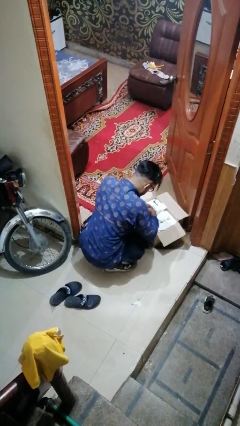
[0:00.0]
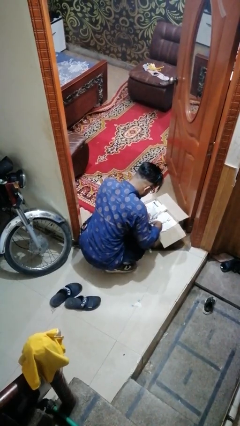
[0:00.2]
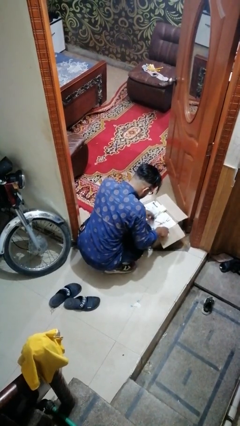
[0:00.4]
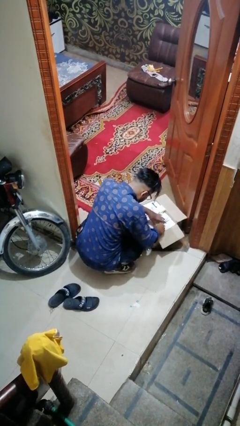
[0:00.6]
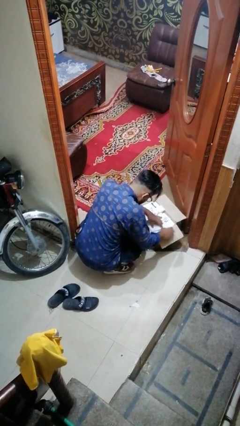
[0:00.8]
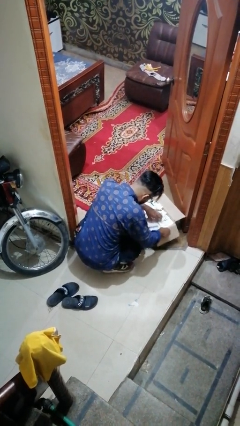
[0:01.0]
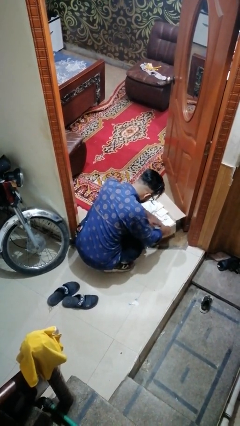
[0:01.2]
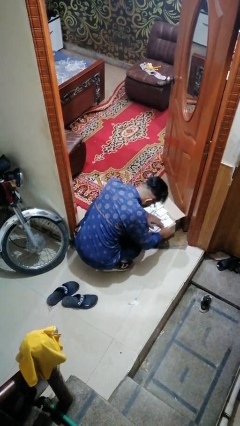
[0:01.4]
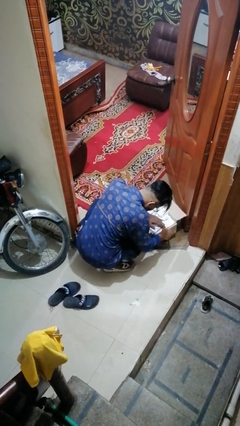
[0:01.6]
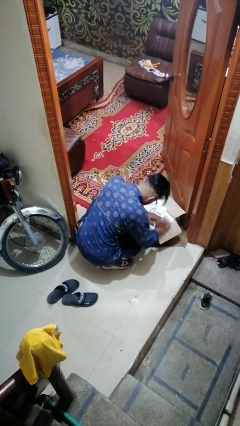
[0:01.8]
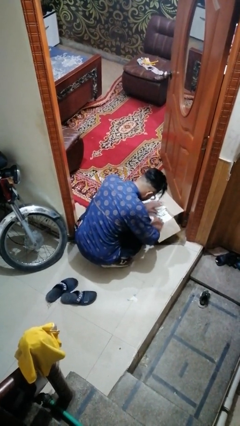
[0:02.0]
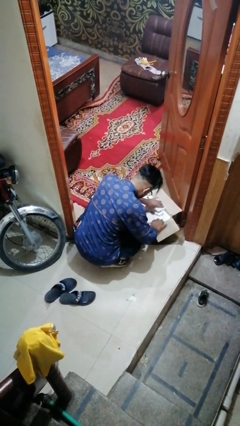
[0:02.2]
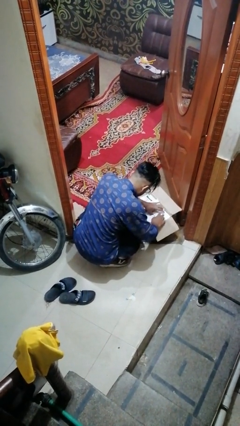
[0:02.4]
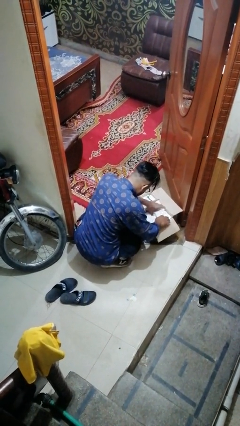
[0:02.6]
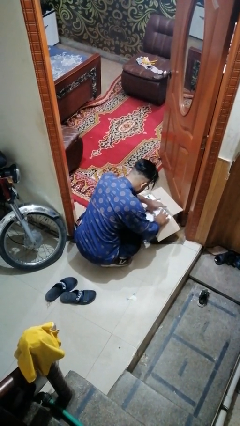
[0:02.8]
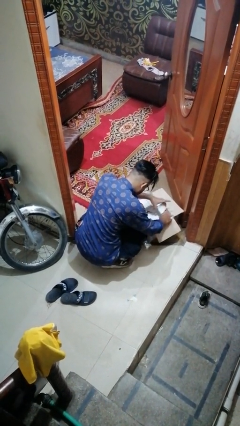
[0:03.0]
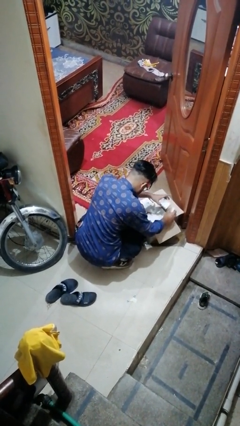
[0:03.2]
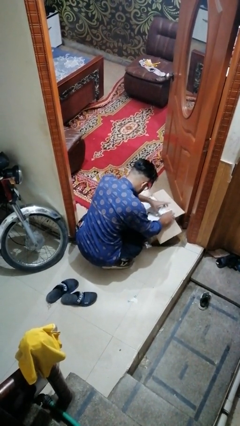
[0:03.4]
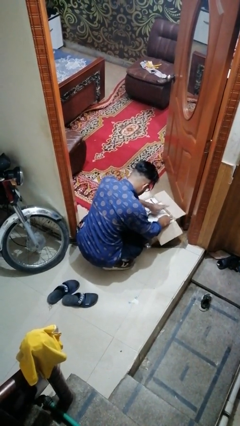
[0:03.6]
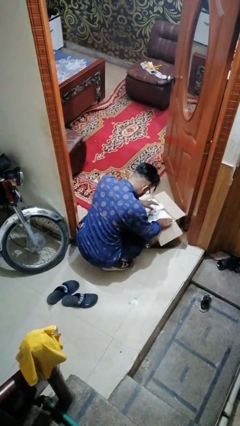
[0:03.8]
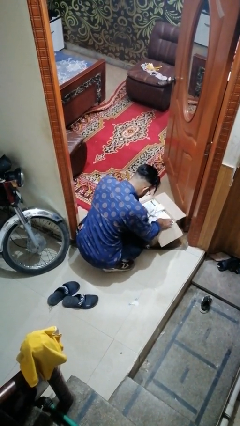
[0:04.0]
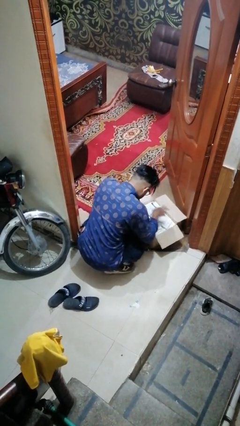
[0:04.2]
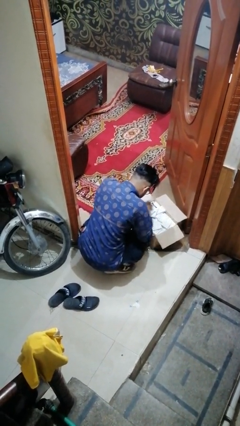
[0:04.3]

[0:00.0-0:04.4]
person searches in box

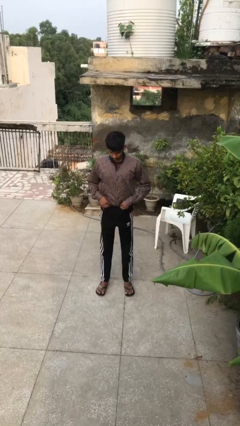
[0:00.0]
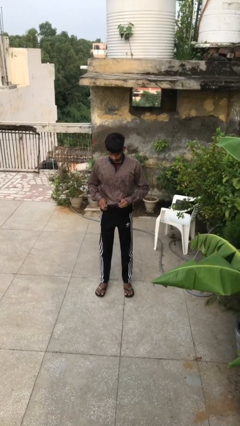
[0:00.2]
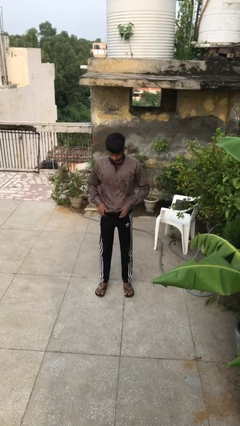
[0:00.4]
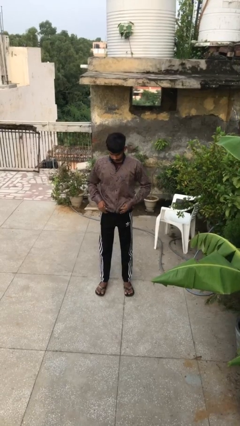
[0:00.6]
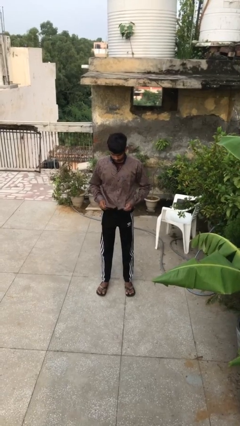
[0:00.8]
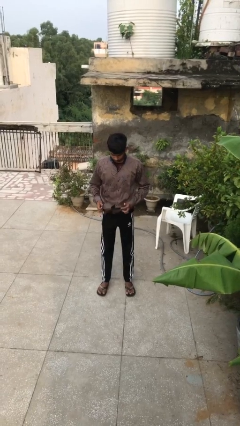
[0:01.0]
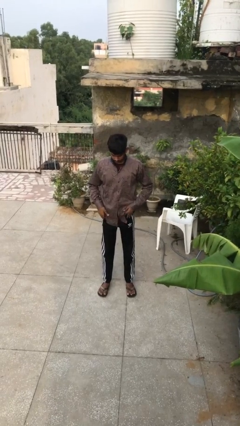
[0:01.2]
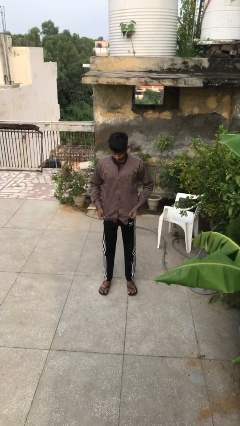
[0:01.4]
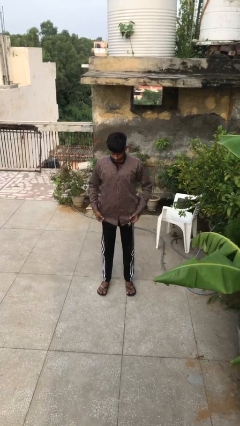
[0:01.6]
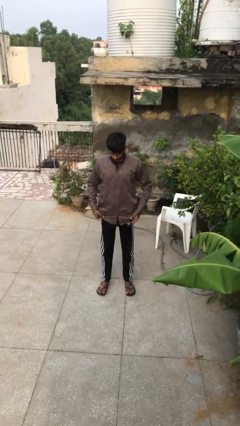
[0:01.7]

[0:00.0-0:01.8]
person untucks shirt

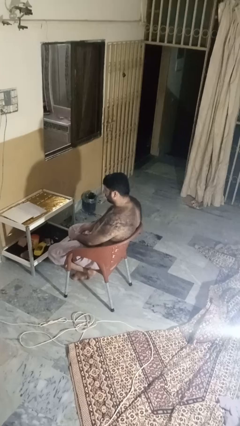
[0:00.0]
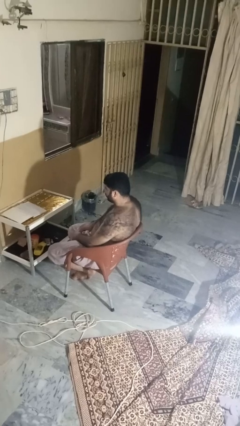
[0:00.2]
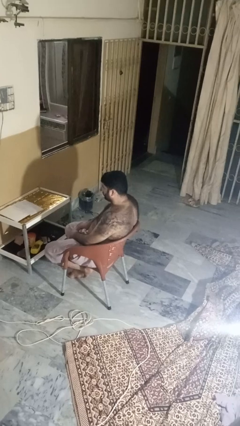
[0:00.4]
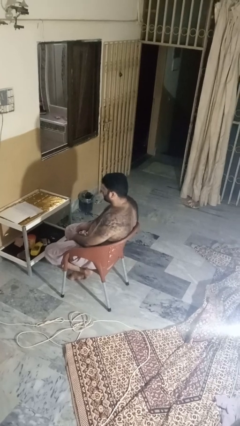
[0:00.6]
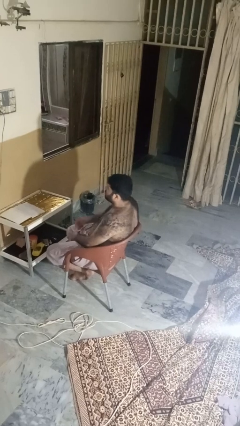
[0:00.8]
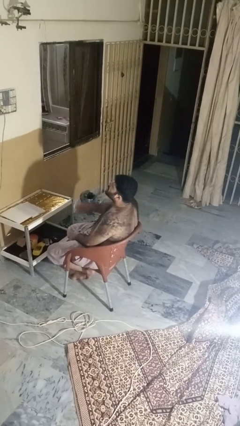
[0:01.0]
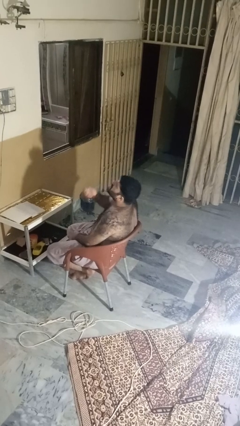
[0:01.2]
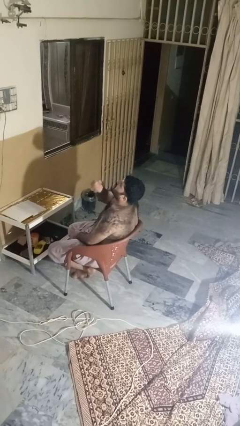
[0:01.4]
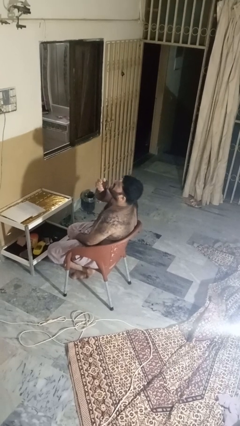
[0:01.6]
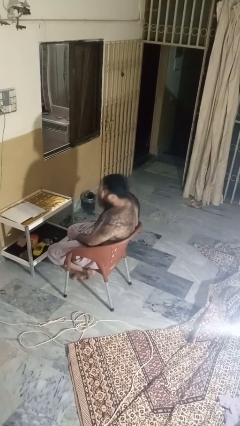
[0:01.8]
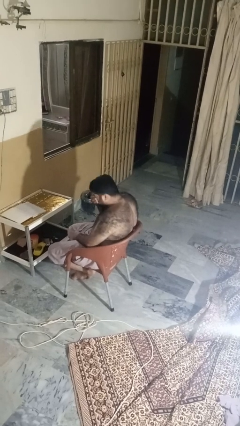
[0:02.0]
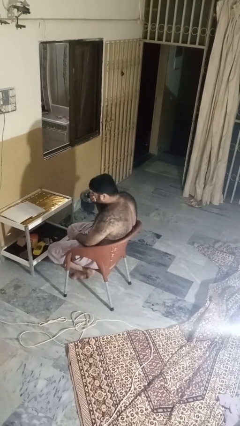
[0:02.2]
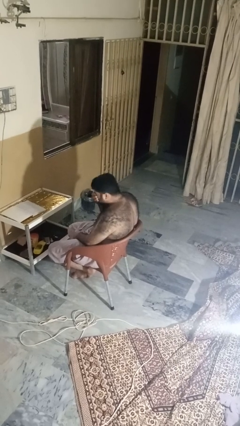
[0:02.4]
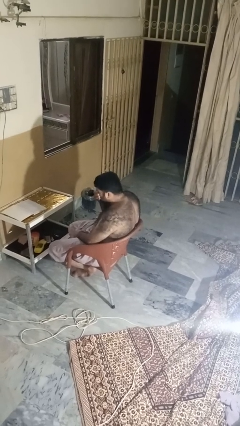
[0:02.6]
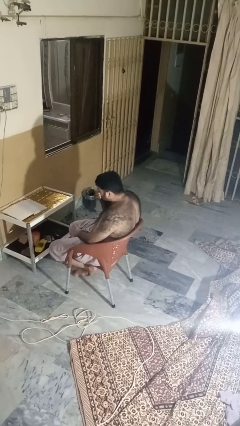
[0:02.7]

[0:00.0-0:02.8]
person sneezes into hand

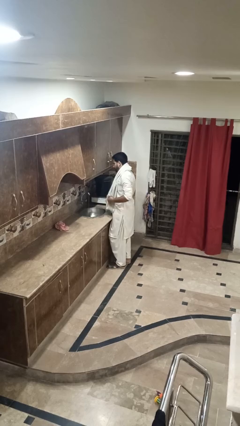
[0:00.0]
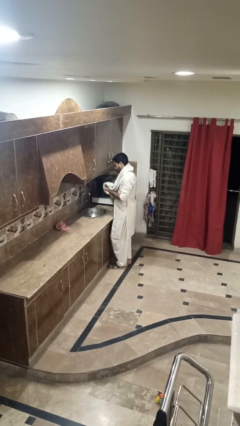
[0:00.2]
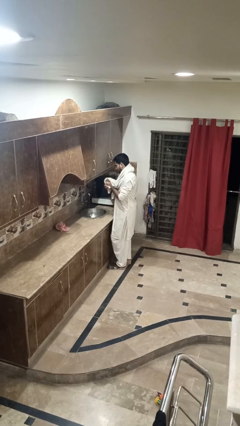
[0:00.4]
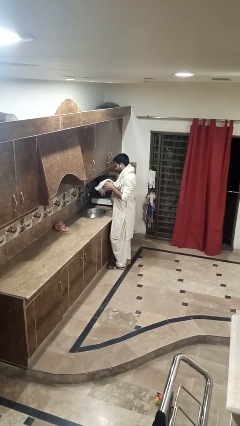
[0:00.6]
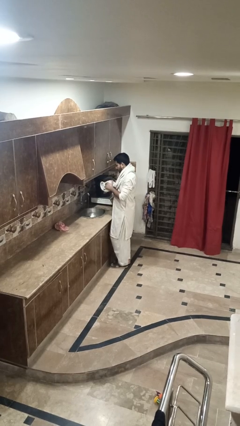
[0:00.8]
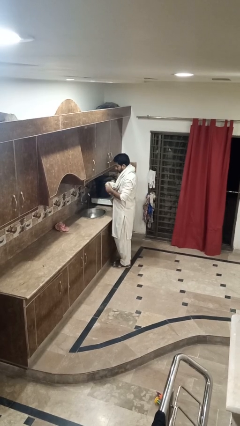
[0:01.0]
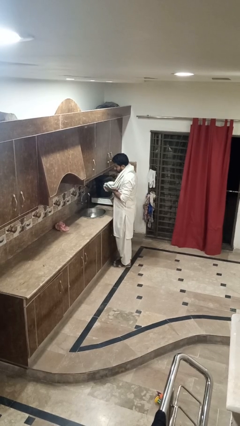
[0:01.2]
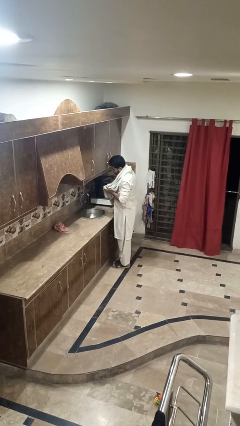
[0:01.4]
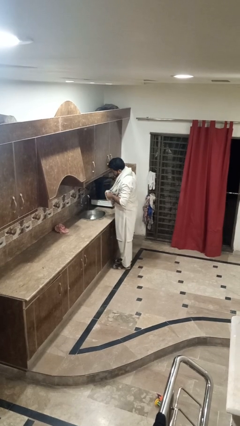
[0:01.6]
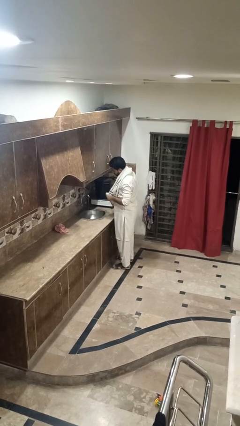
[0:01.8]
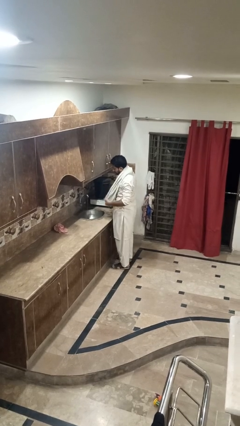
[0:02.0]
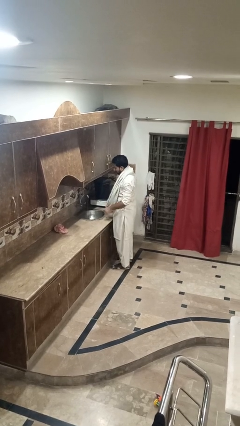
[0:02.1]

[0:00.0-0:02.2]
person dries hands with towel

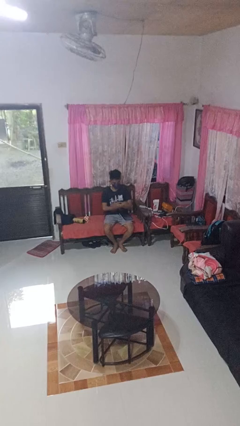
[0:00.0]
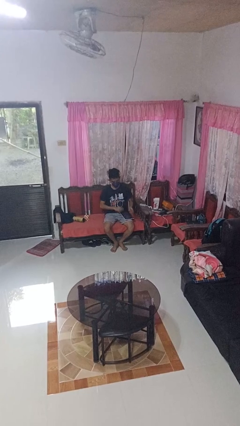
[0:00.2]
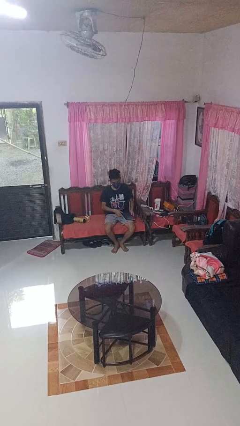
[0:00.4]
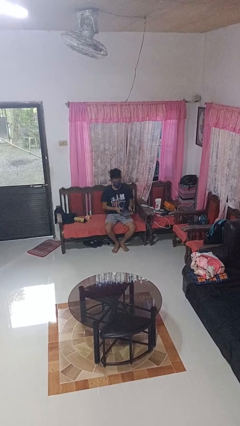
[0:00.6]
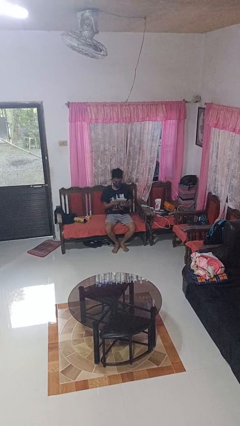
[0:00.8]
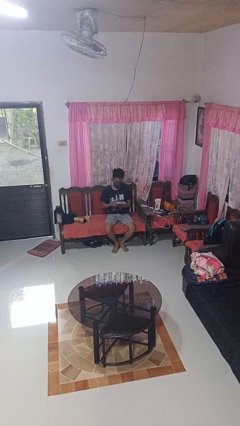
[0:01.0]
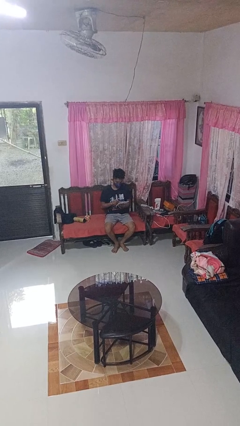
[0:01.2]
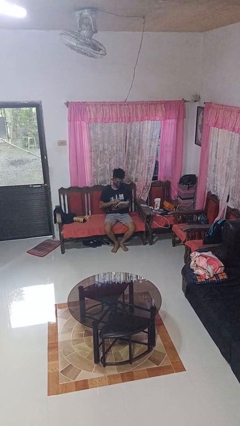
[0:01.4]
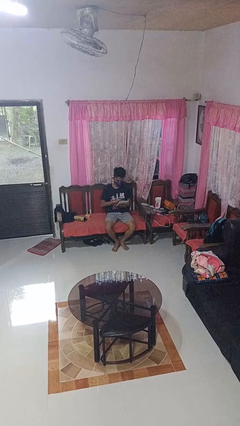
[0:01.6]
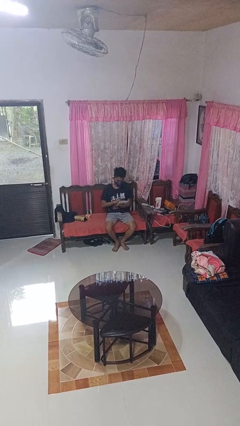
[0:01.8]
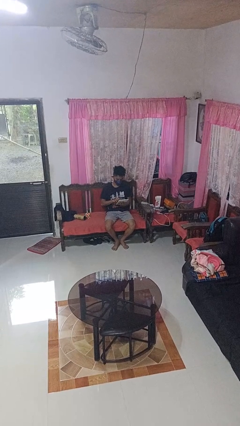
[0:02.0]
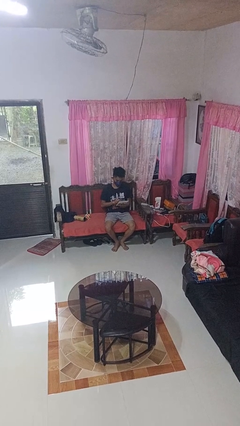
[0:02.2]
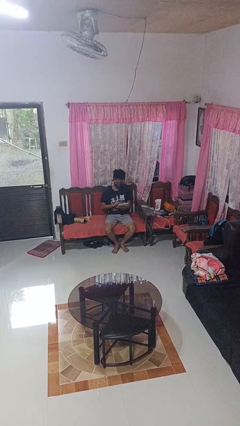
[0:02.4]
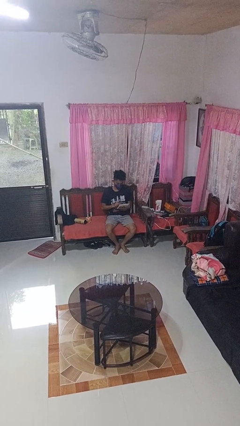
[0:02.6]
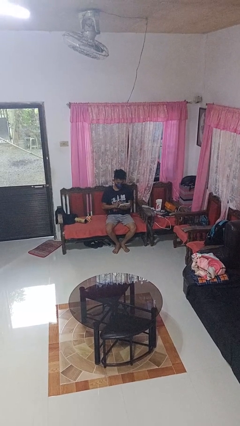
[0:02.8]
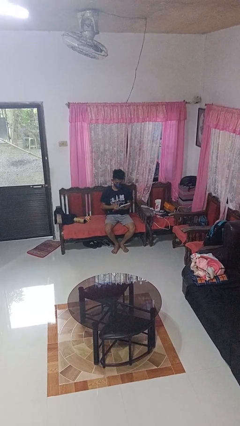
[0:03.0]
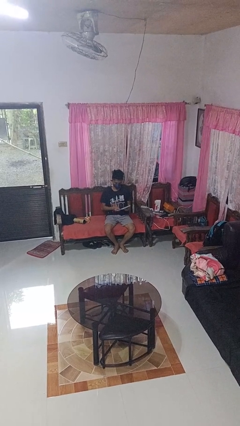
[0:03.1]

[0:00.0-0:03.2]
person interacts with tablet

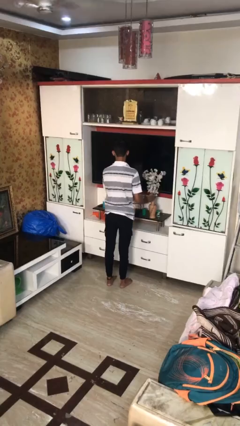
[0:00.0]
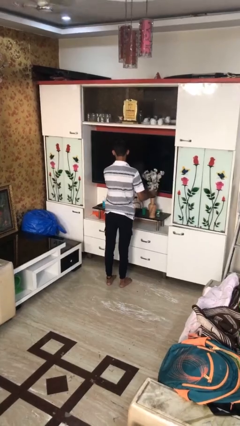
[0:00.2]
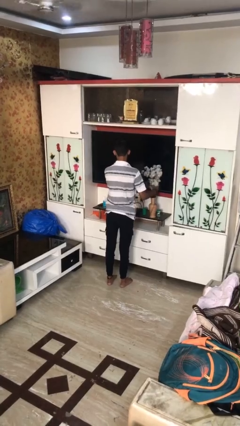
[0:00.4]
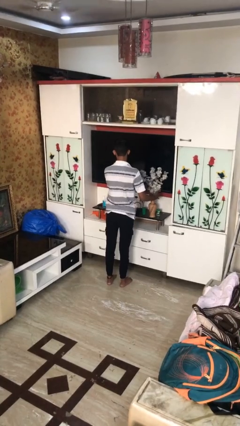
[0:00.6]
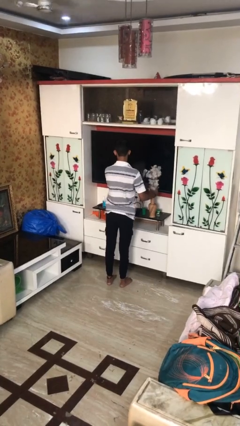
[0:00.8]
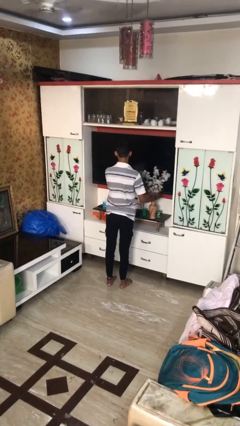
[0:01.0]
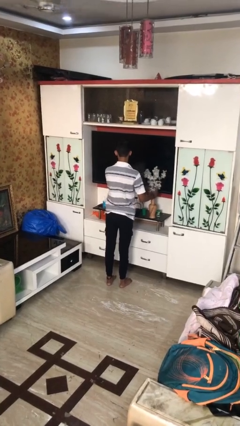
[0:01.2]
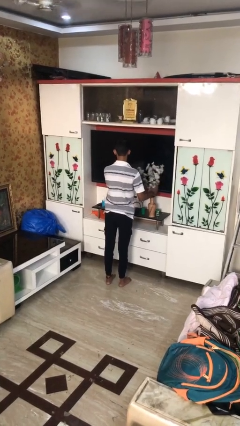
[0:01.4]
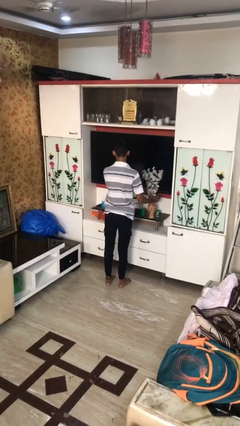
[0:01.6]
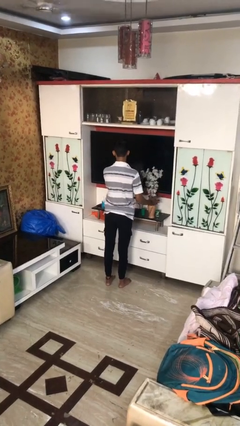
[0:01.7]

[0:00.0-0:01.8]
person arranges flowers in vase

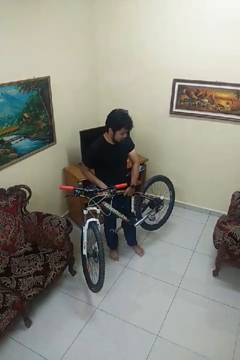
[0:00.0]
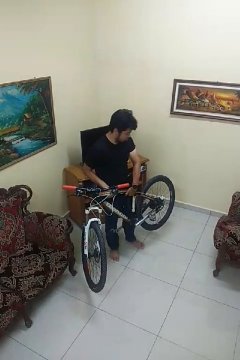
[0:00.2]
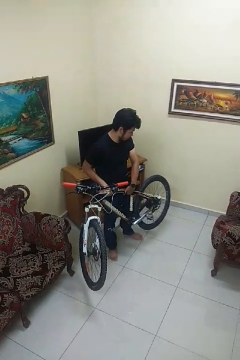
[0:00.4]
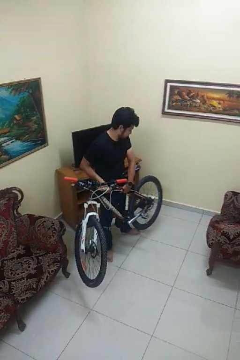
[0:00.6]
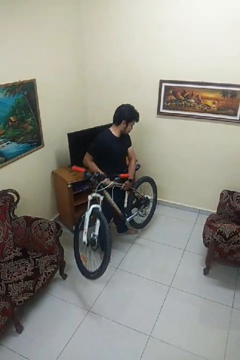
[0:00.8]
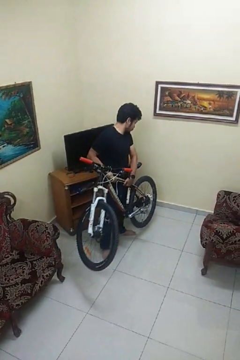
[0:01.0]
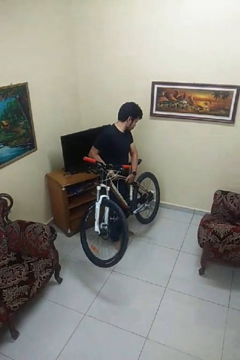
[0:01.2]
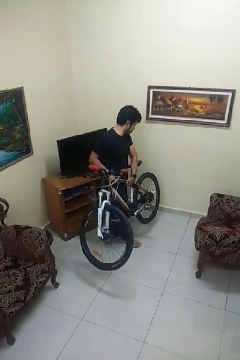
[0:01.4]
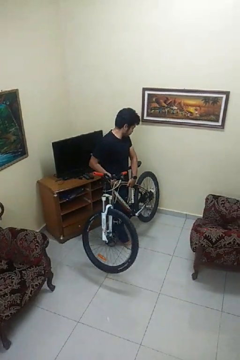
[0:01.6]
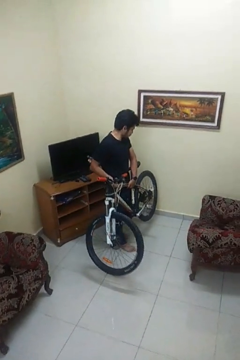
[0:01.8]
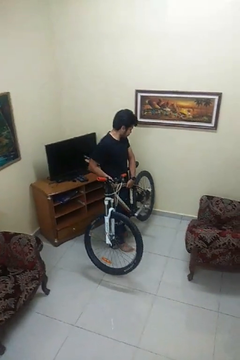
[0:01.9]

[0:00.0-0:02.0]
person carries bicycle
